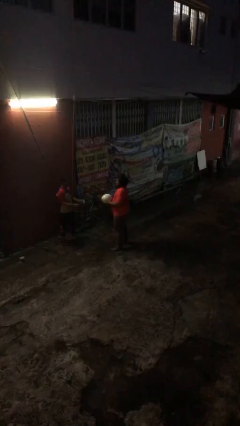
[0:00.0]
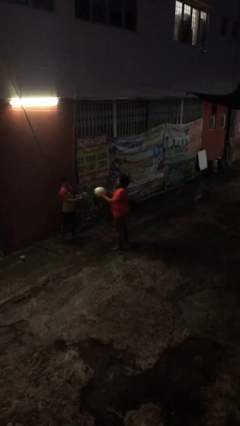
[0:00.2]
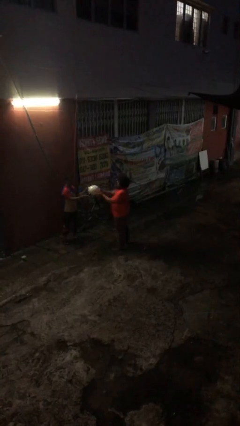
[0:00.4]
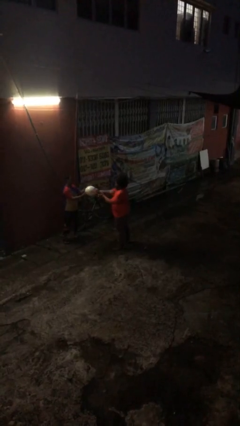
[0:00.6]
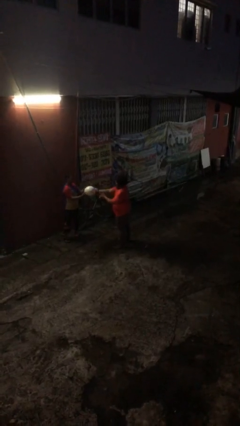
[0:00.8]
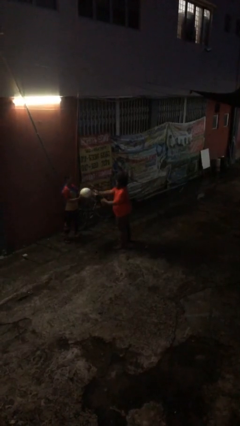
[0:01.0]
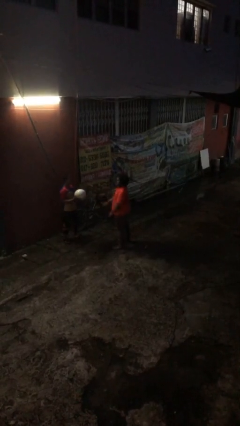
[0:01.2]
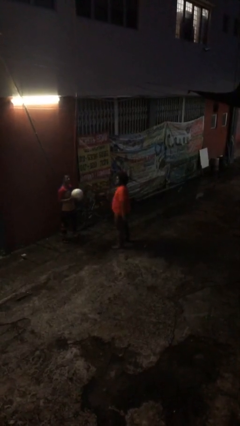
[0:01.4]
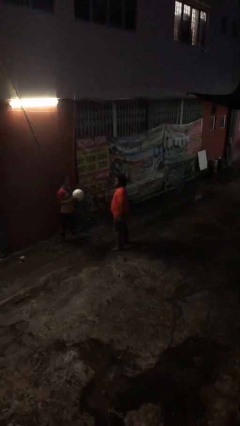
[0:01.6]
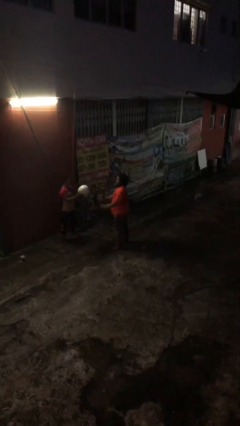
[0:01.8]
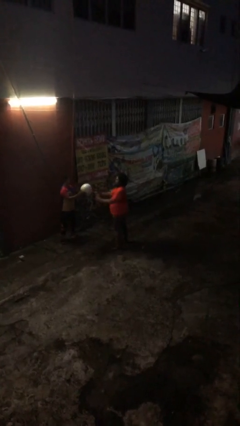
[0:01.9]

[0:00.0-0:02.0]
person transfers object to person

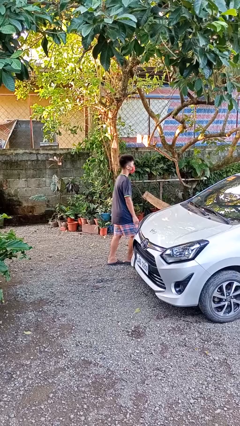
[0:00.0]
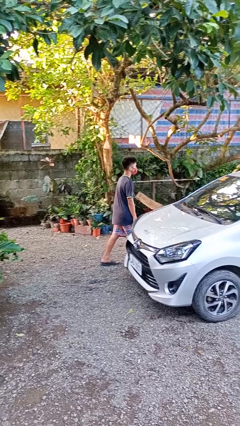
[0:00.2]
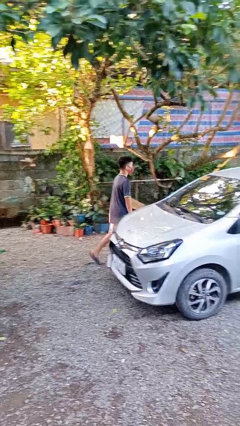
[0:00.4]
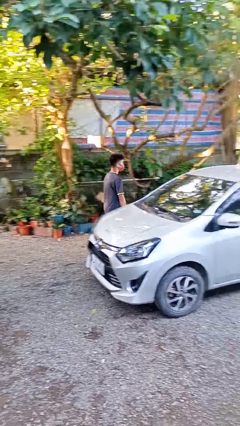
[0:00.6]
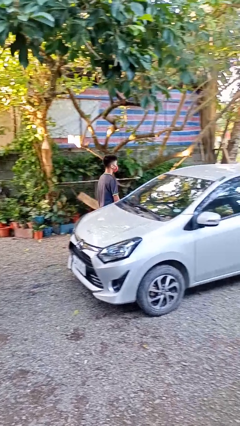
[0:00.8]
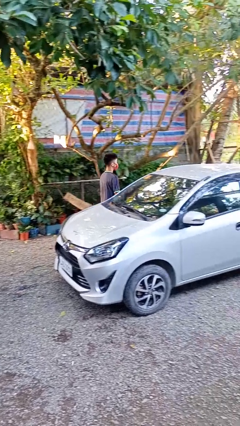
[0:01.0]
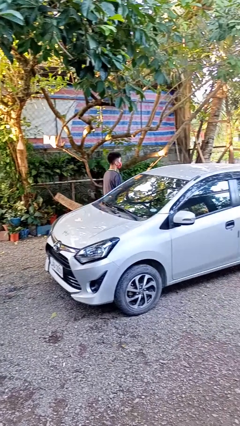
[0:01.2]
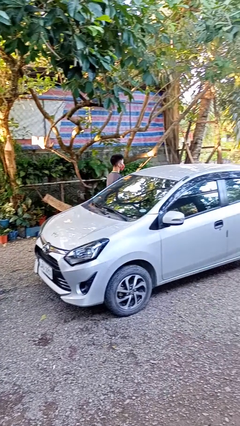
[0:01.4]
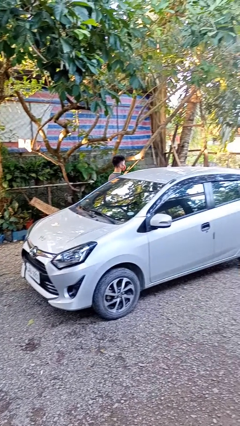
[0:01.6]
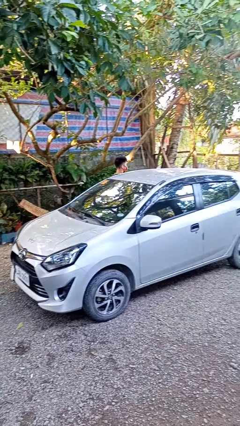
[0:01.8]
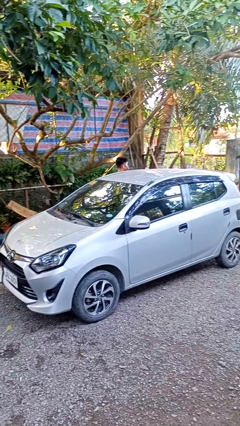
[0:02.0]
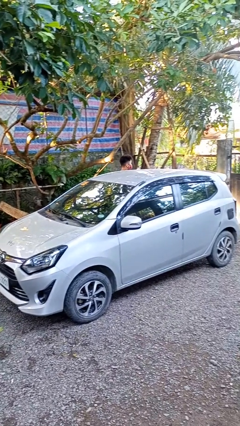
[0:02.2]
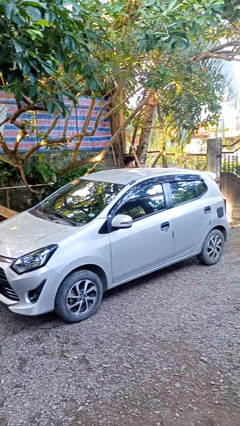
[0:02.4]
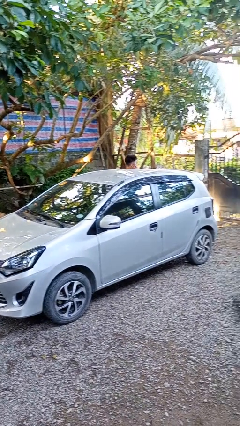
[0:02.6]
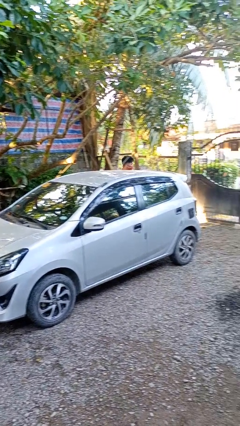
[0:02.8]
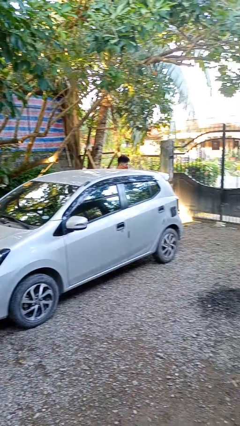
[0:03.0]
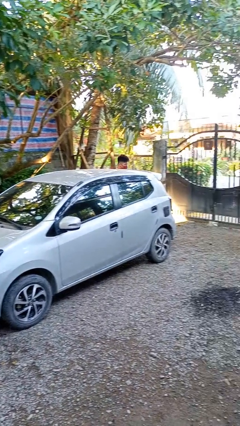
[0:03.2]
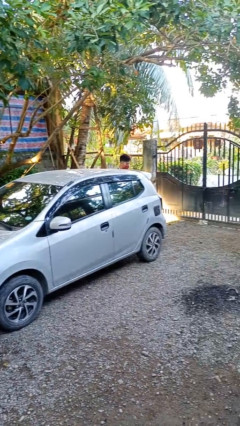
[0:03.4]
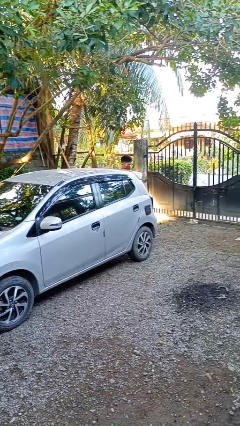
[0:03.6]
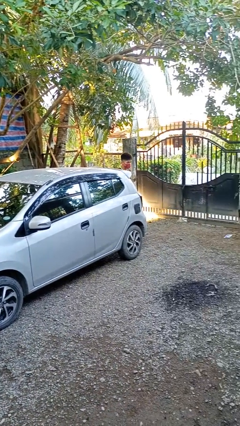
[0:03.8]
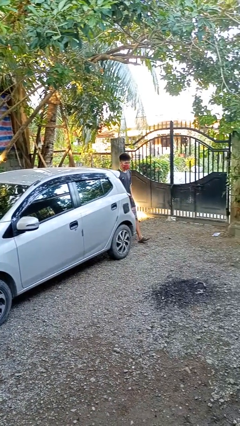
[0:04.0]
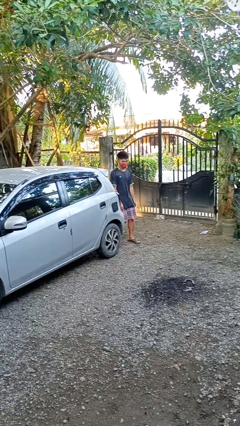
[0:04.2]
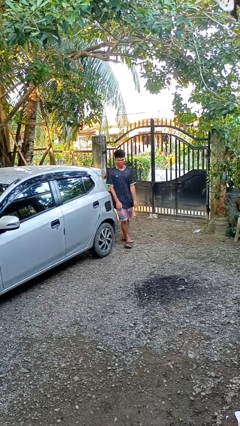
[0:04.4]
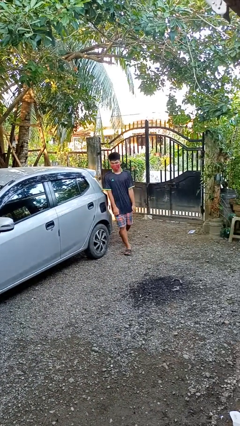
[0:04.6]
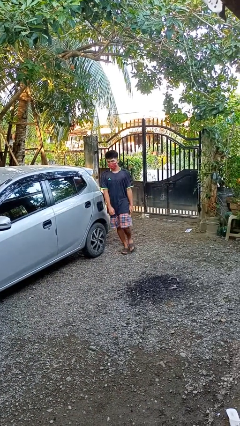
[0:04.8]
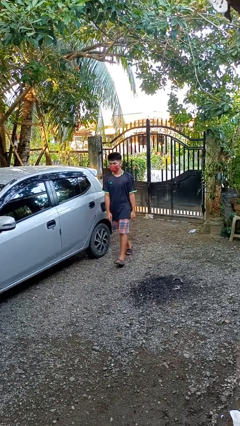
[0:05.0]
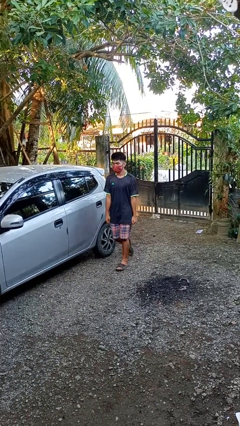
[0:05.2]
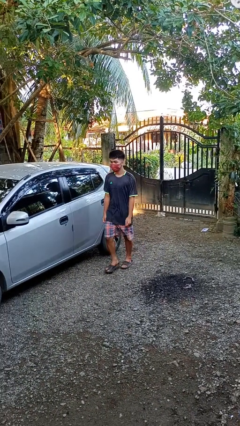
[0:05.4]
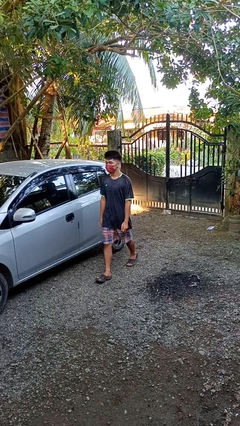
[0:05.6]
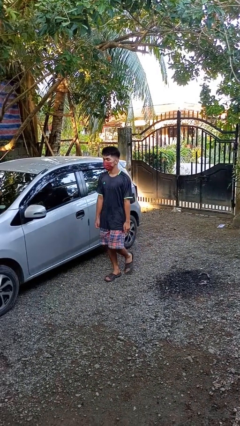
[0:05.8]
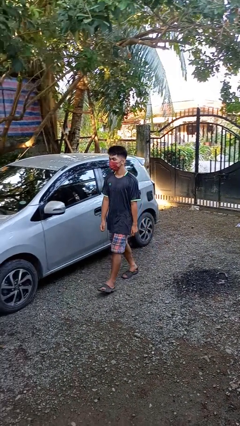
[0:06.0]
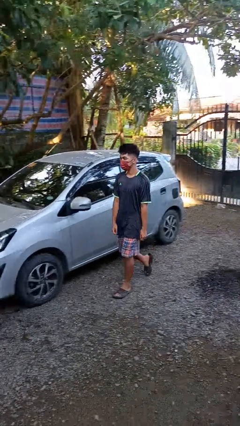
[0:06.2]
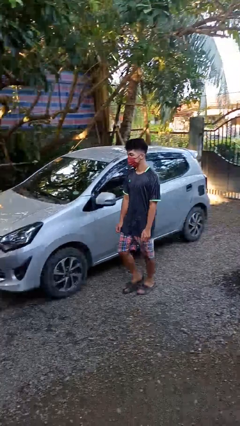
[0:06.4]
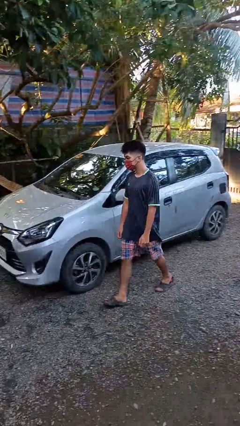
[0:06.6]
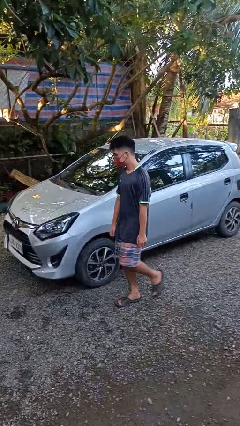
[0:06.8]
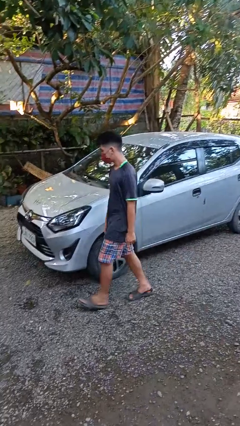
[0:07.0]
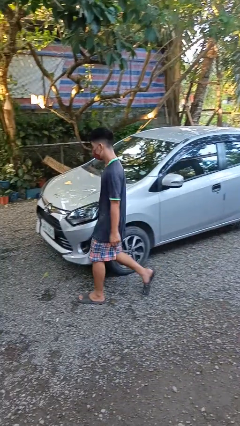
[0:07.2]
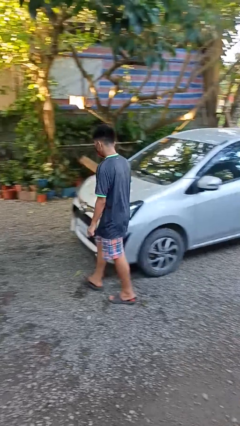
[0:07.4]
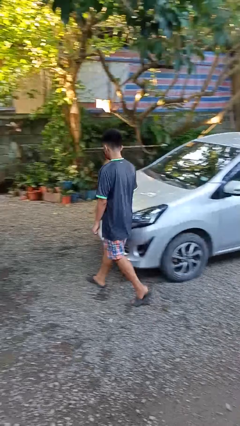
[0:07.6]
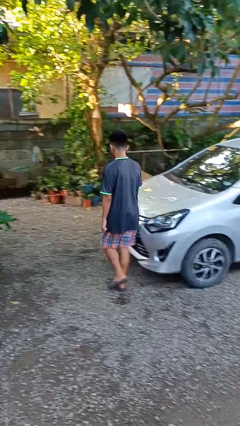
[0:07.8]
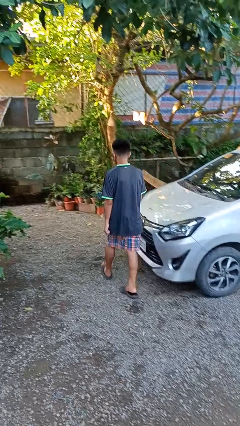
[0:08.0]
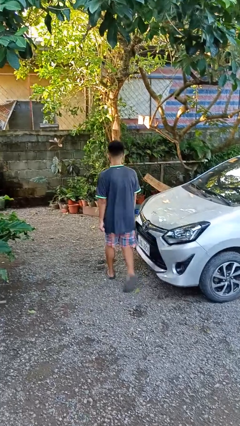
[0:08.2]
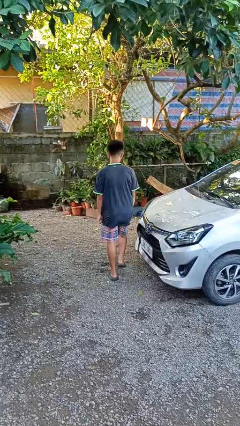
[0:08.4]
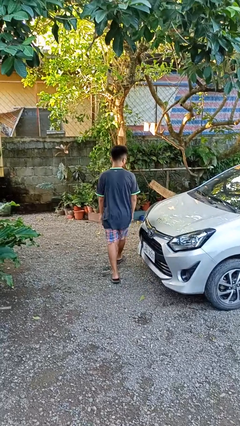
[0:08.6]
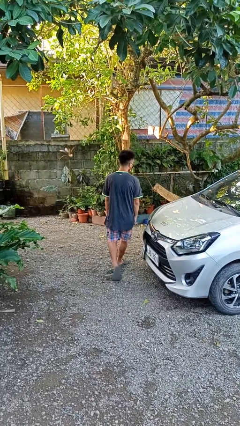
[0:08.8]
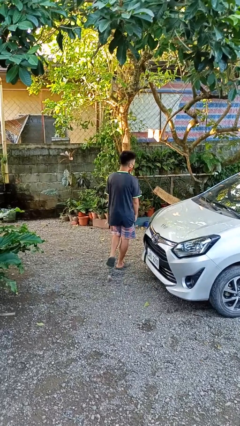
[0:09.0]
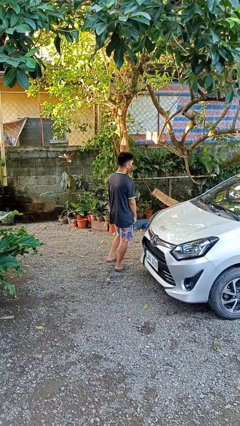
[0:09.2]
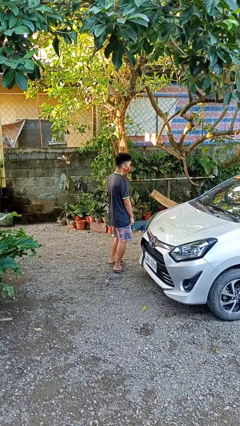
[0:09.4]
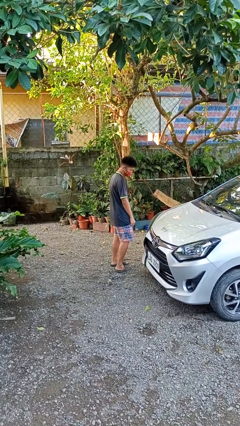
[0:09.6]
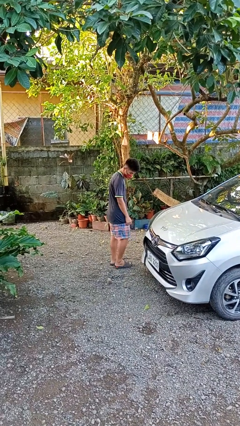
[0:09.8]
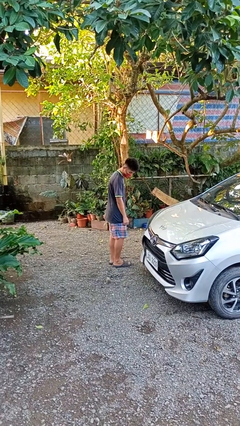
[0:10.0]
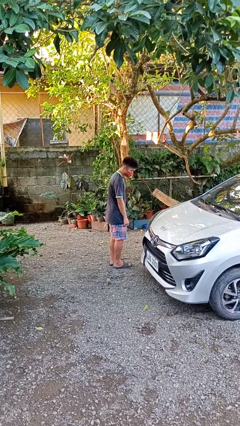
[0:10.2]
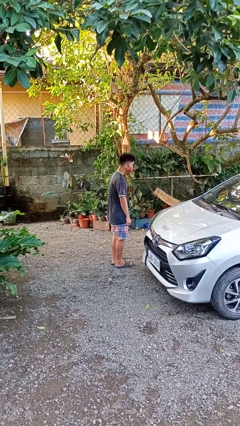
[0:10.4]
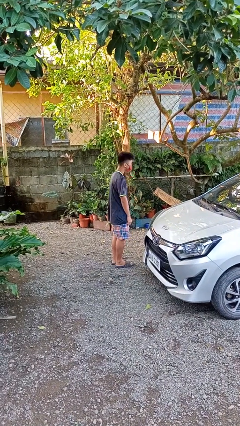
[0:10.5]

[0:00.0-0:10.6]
person walks around car

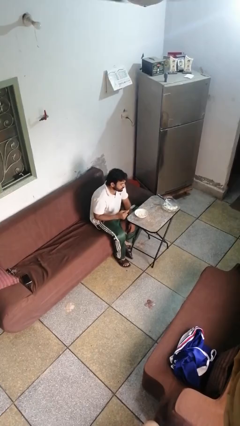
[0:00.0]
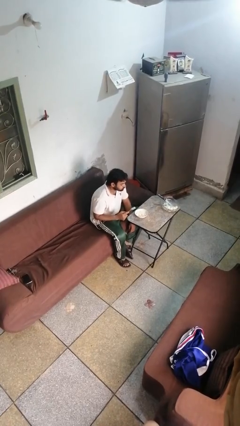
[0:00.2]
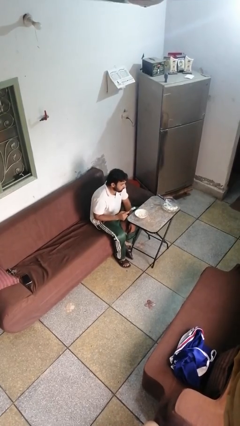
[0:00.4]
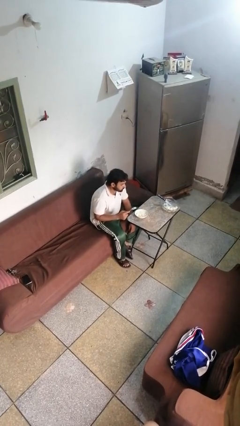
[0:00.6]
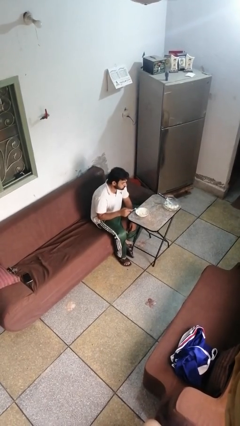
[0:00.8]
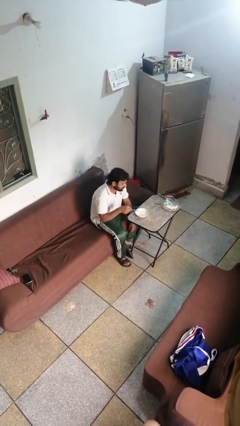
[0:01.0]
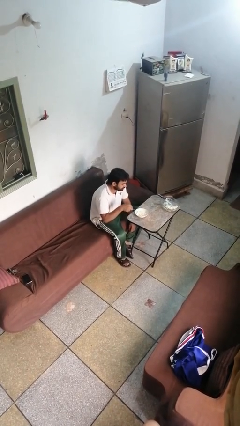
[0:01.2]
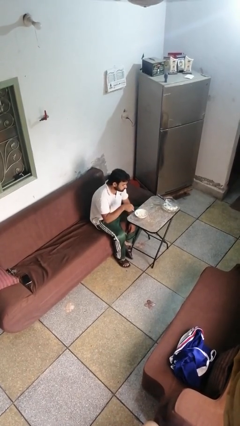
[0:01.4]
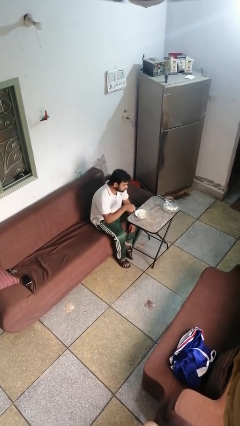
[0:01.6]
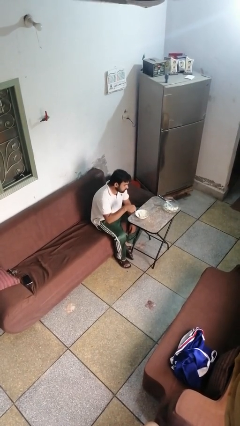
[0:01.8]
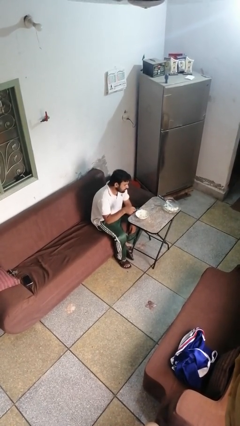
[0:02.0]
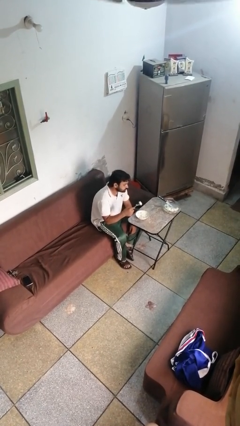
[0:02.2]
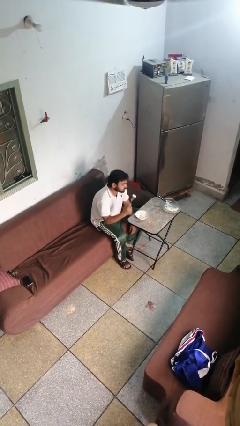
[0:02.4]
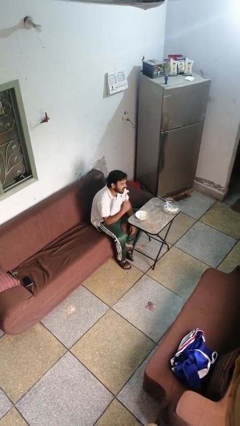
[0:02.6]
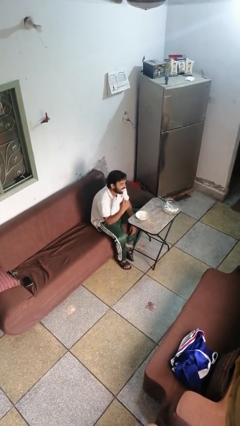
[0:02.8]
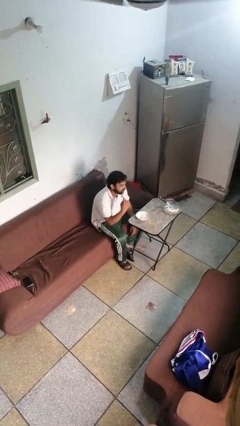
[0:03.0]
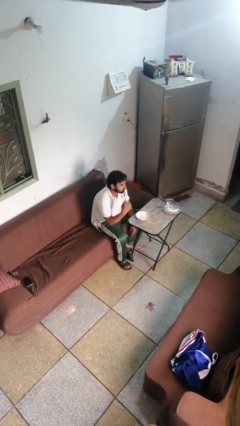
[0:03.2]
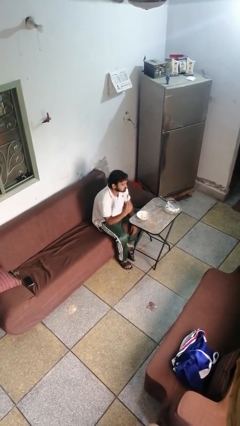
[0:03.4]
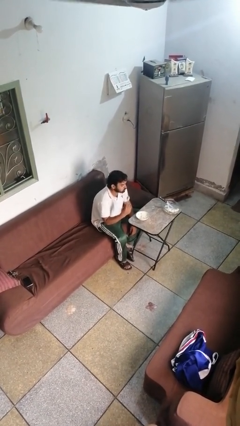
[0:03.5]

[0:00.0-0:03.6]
person eats with utensil

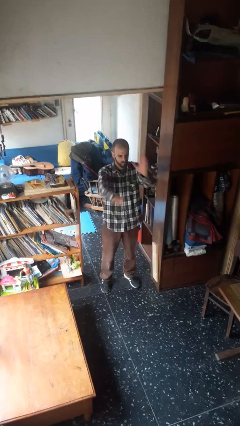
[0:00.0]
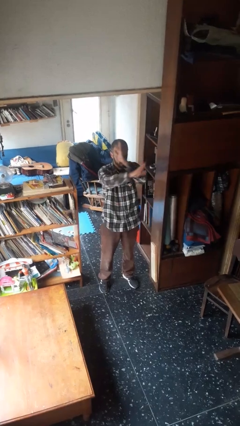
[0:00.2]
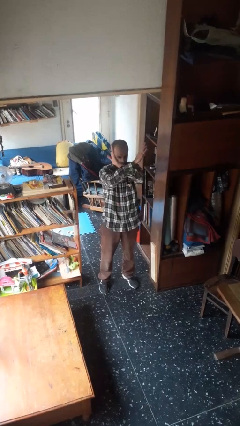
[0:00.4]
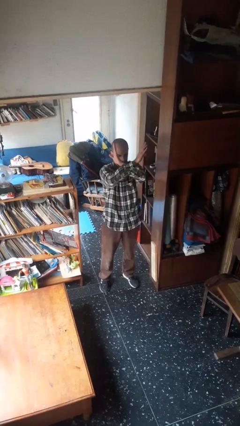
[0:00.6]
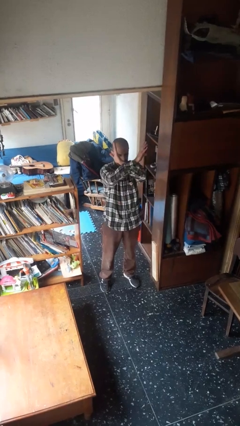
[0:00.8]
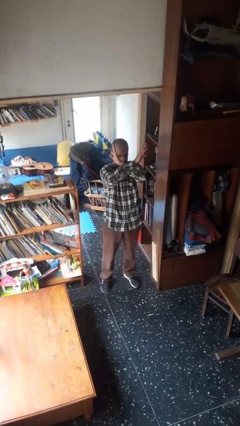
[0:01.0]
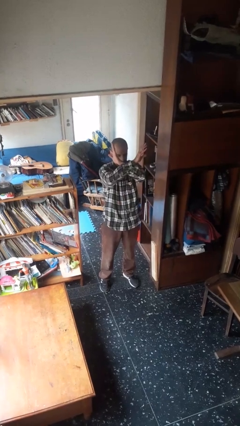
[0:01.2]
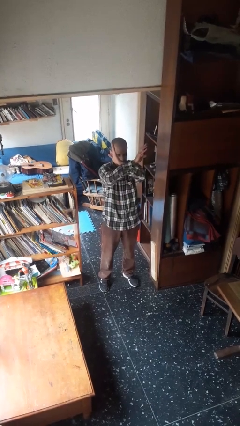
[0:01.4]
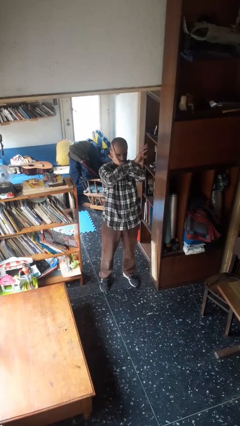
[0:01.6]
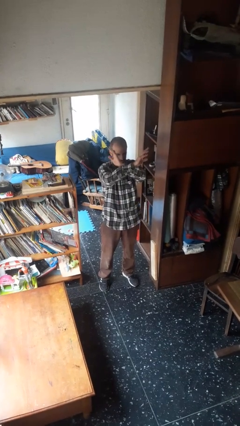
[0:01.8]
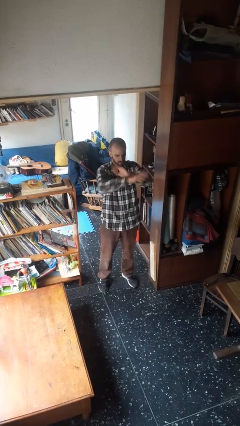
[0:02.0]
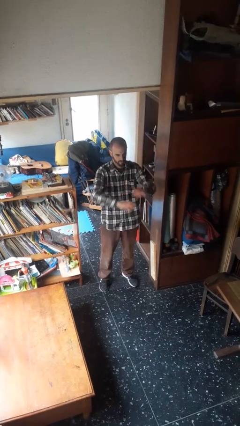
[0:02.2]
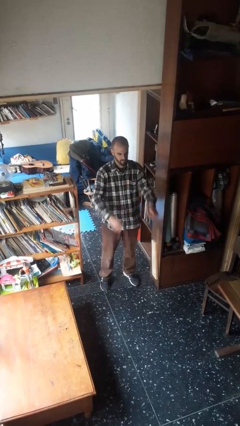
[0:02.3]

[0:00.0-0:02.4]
person gestures arms x
